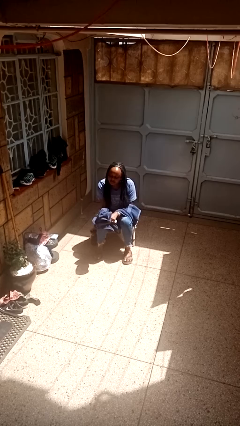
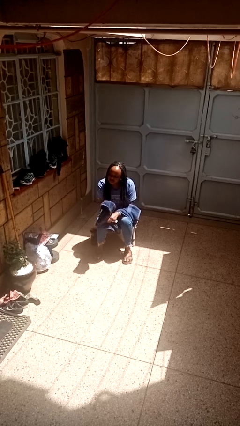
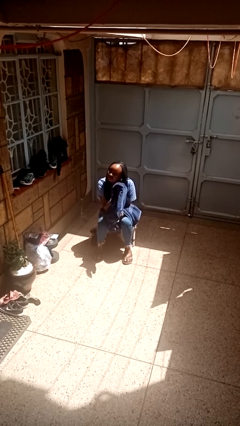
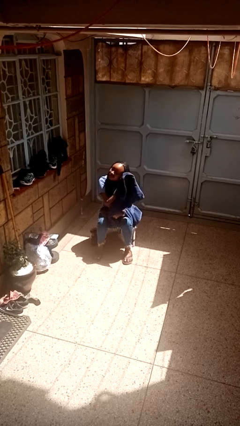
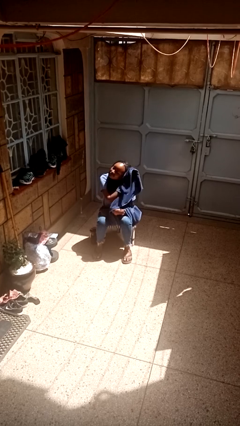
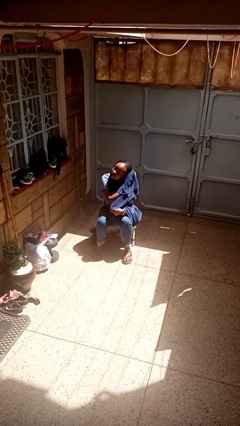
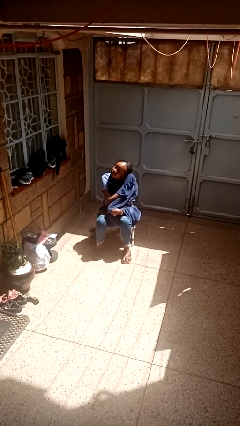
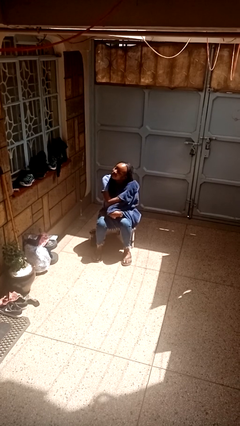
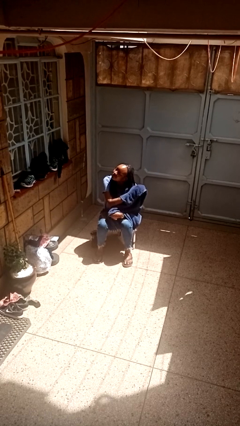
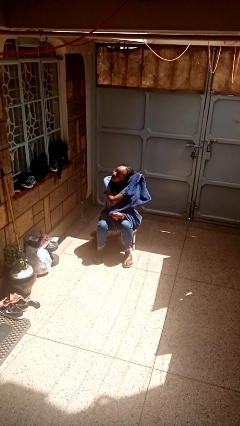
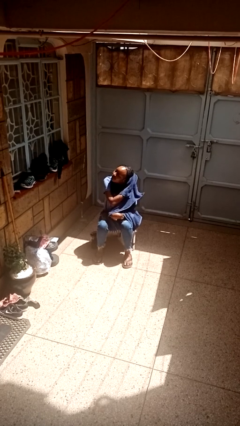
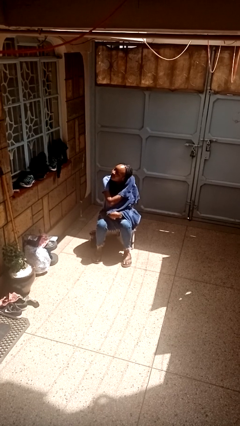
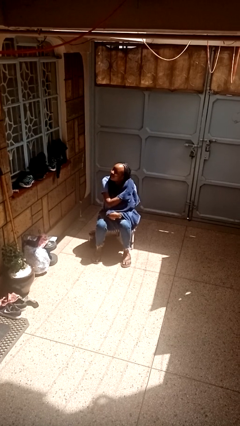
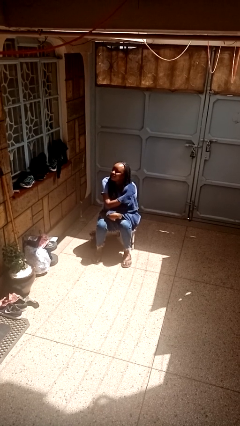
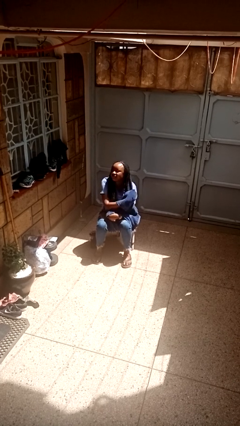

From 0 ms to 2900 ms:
person dries hair with towel

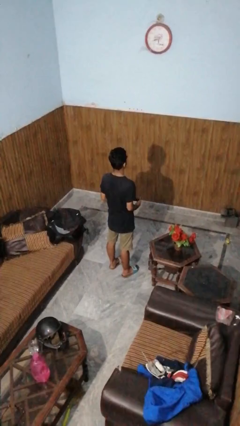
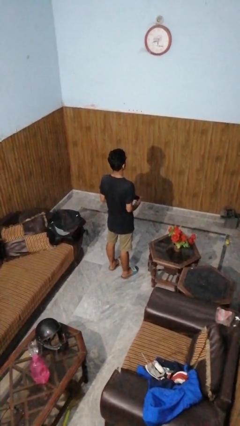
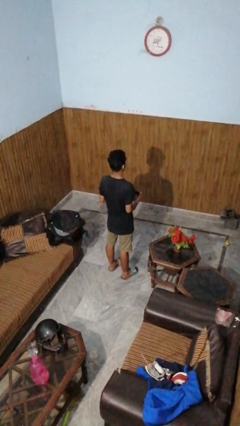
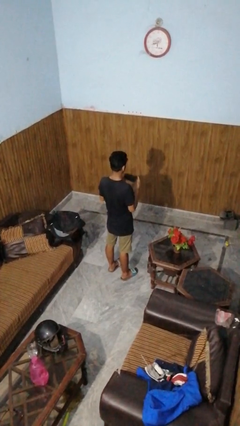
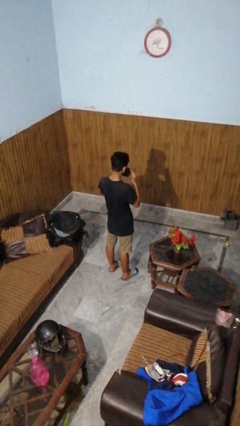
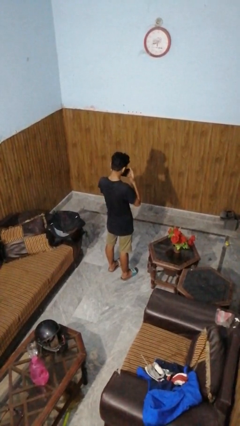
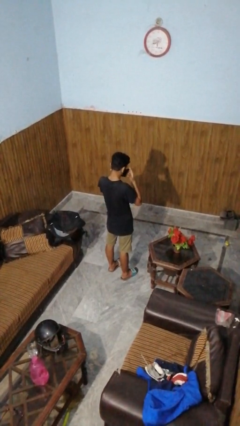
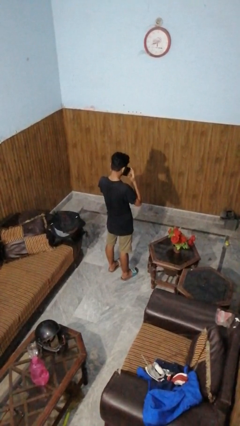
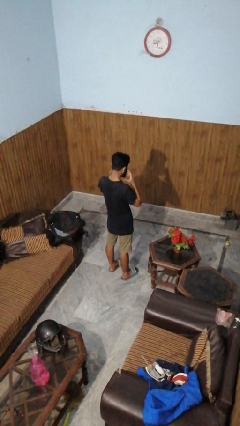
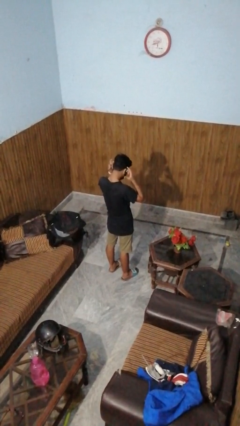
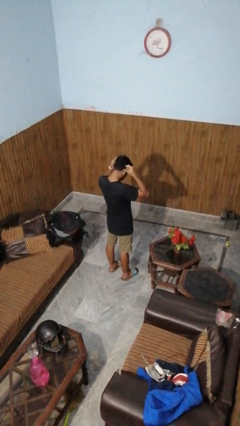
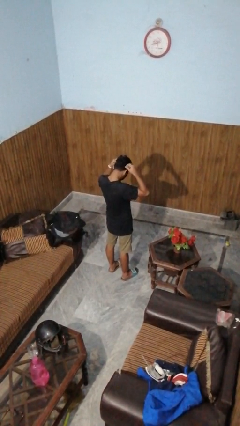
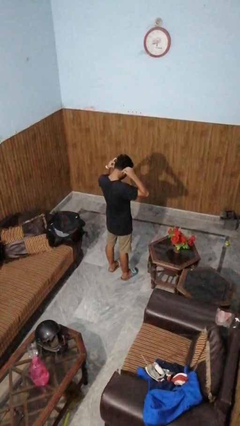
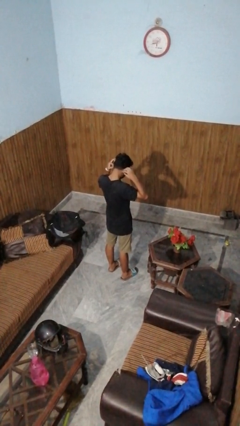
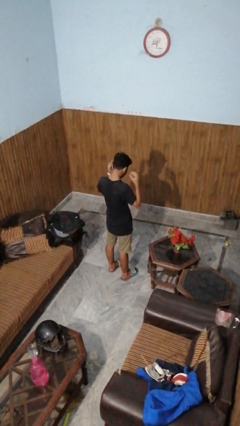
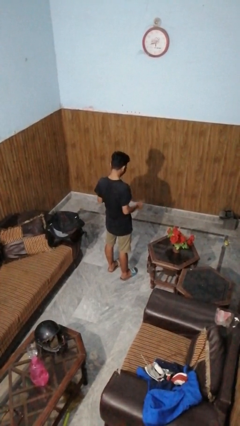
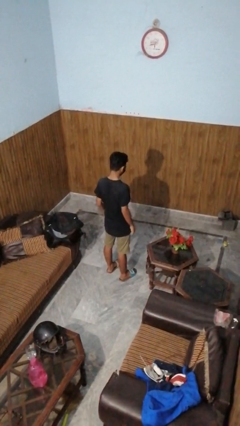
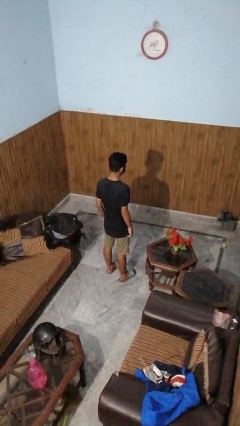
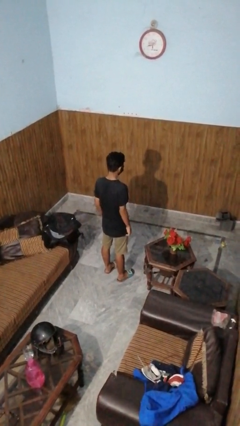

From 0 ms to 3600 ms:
person puts on facemask

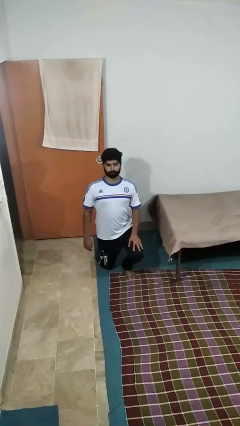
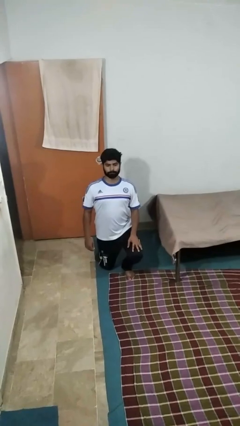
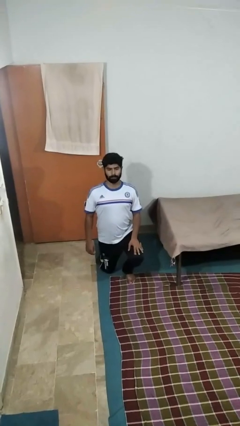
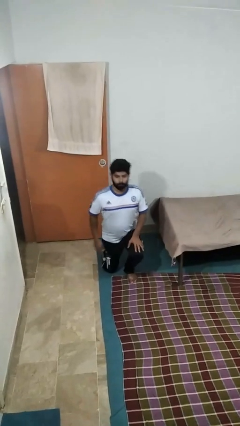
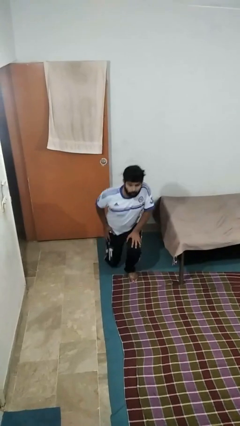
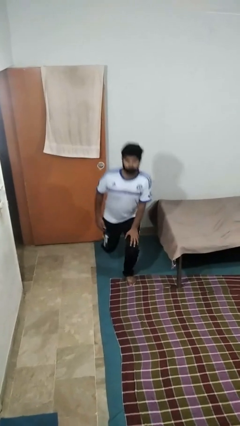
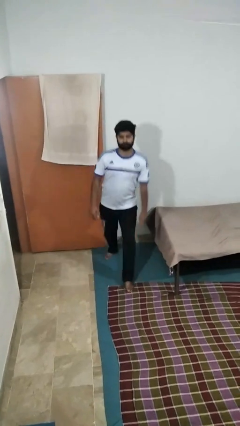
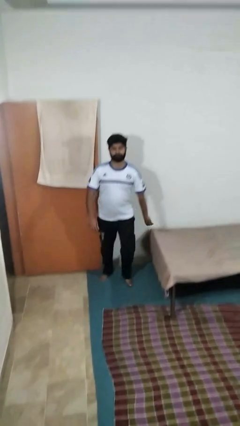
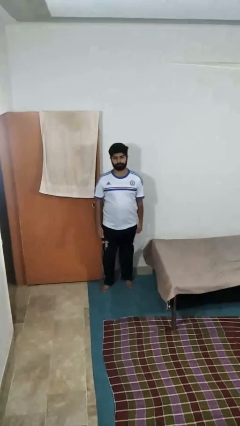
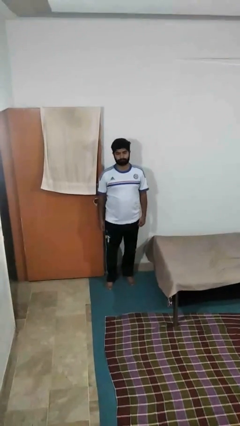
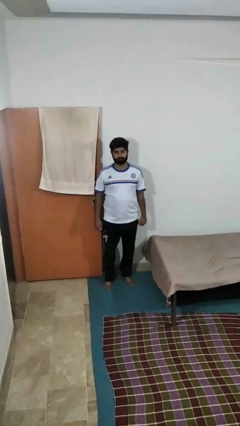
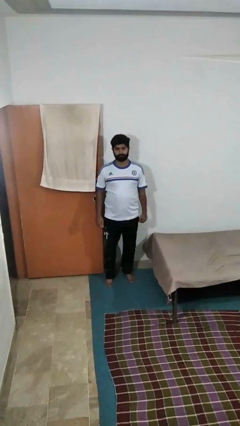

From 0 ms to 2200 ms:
person stands up from floor

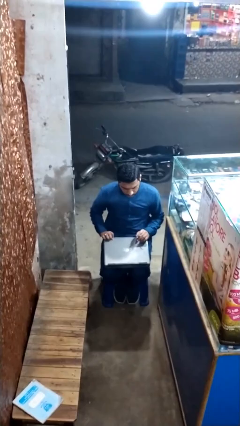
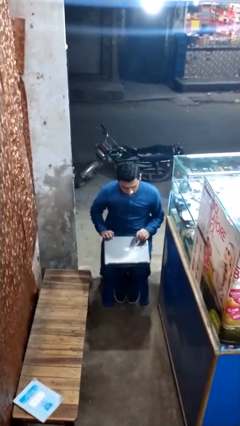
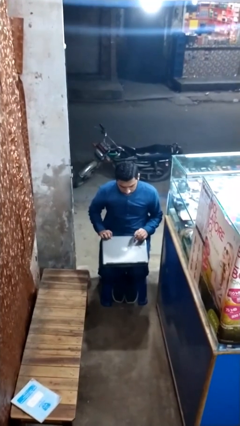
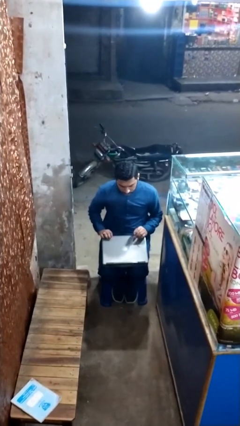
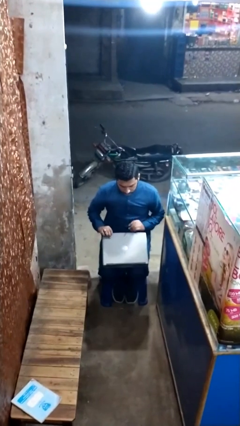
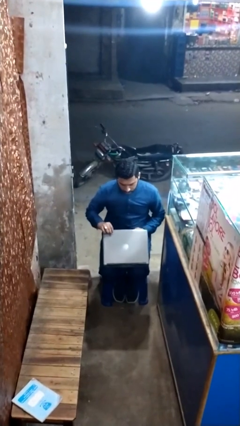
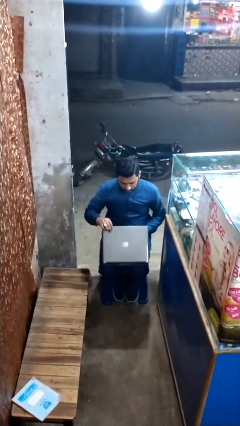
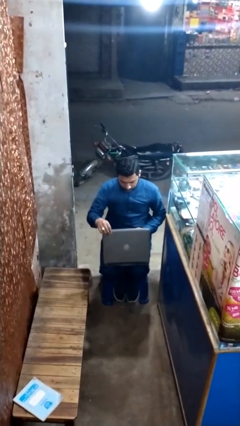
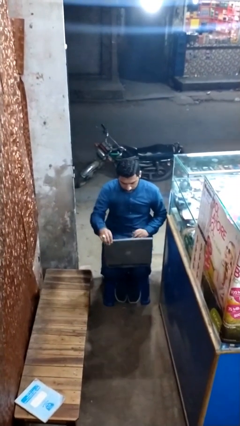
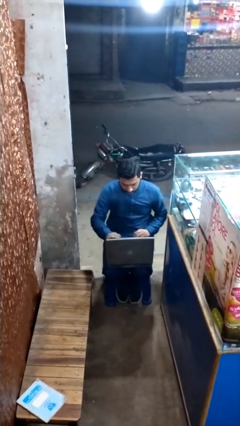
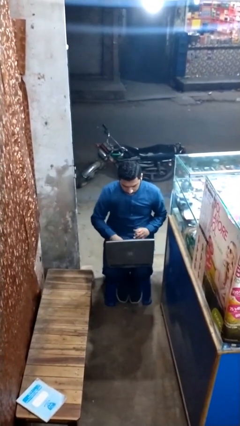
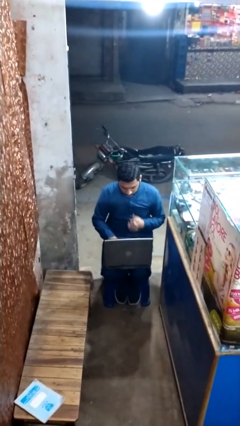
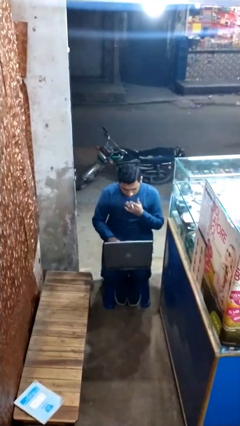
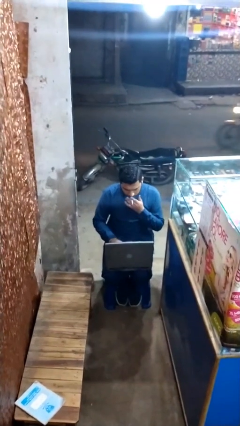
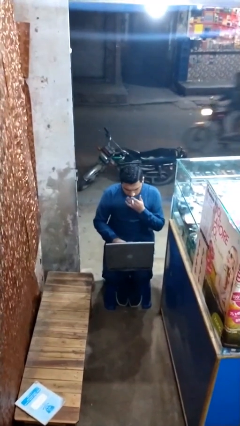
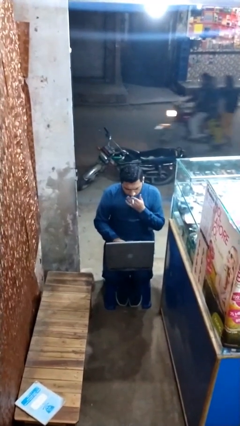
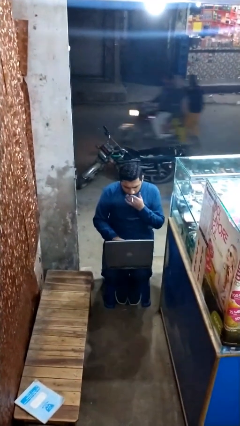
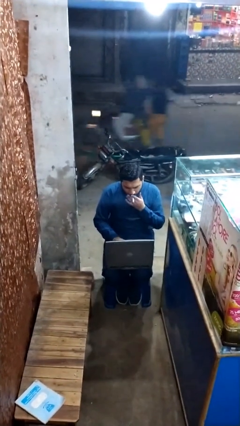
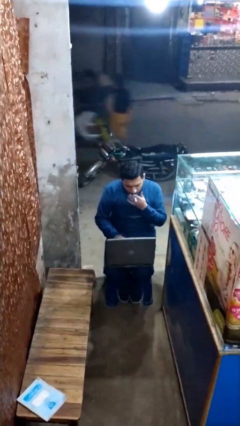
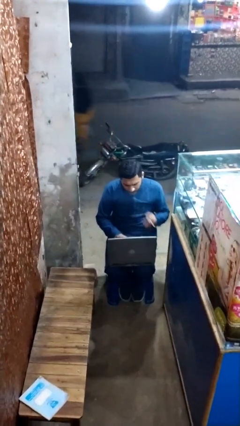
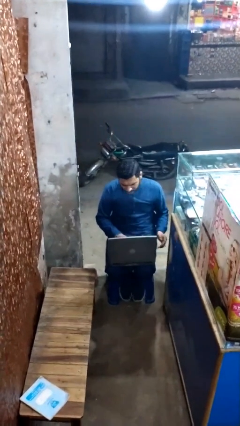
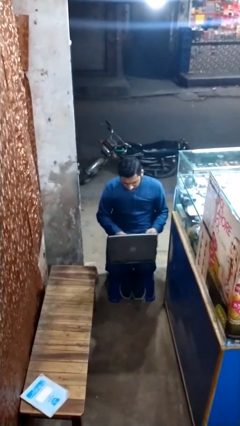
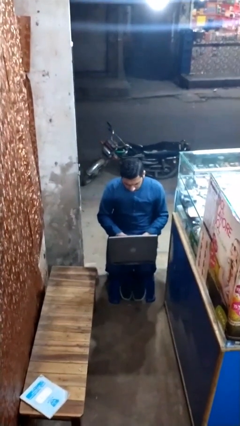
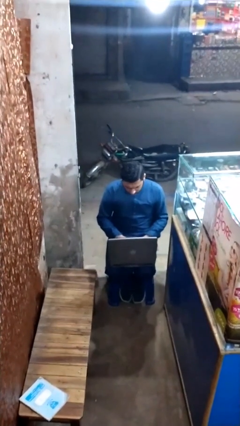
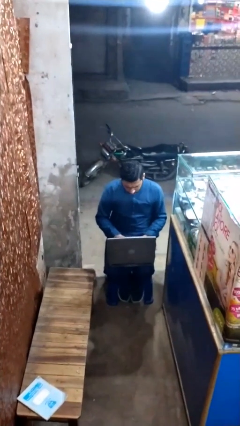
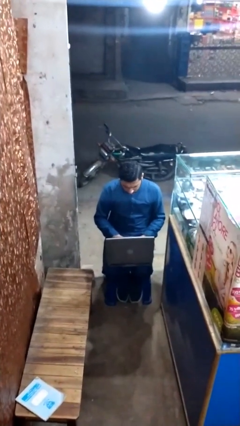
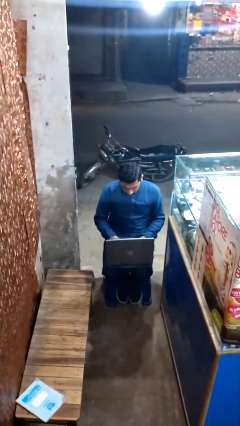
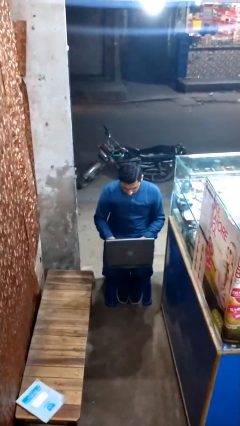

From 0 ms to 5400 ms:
person interacts with laptop

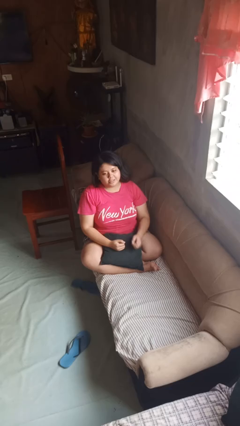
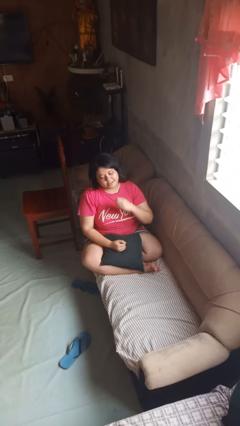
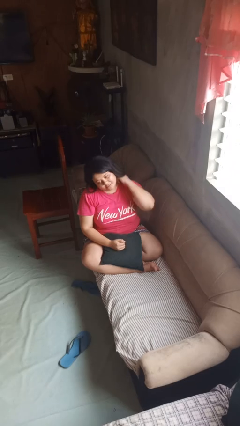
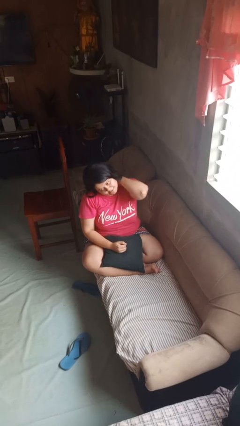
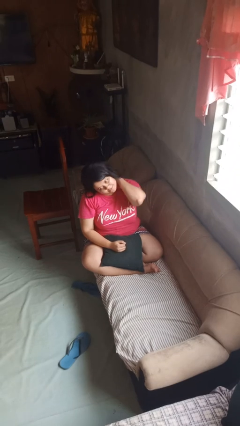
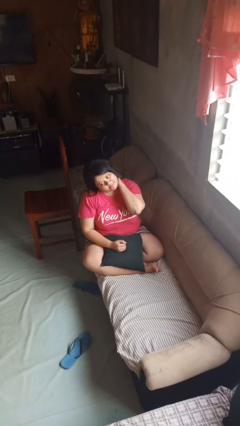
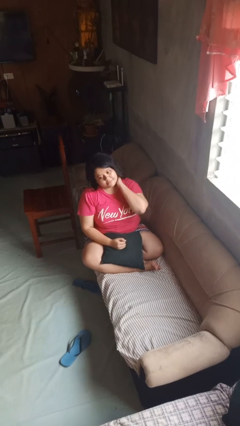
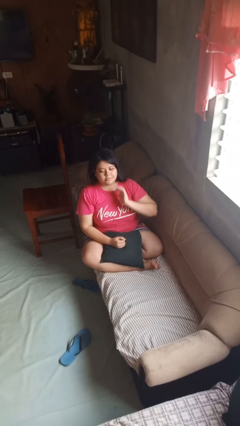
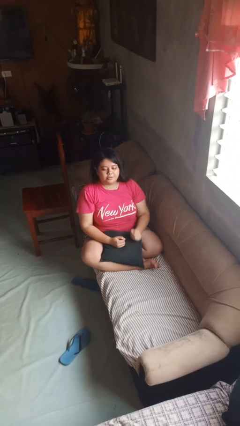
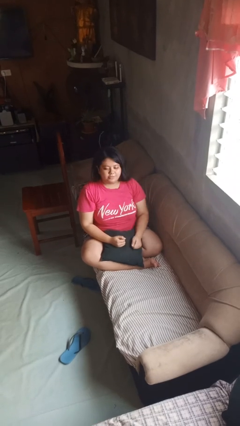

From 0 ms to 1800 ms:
person rubs neck

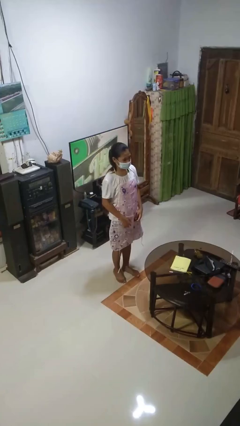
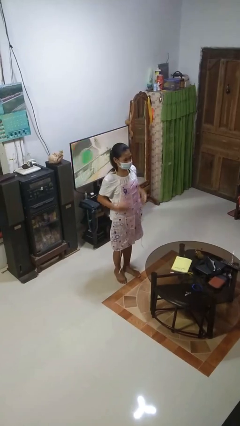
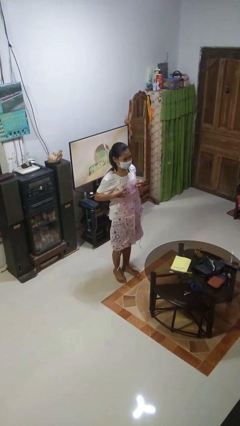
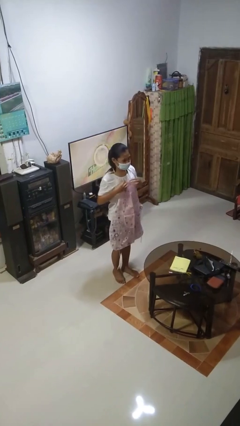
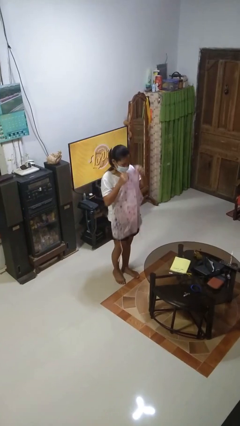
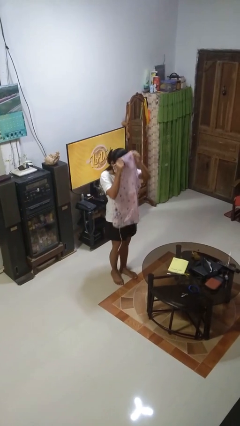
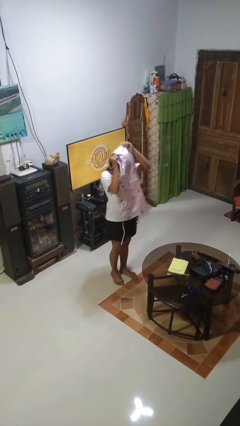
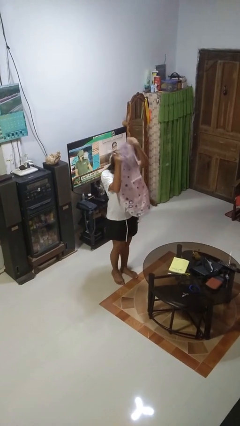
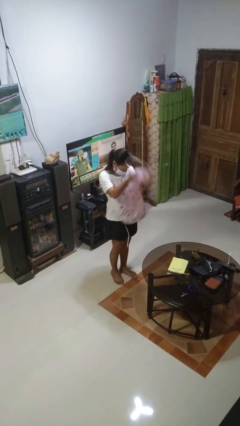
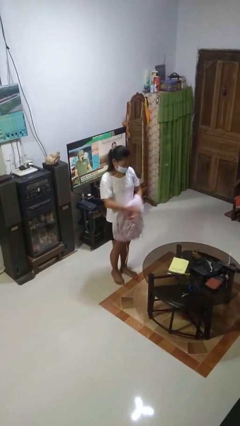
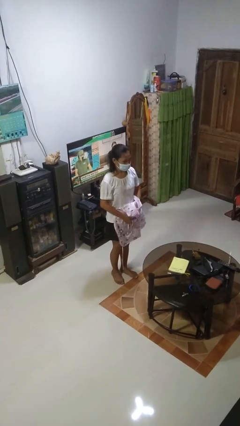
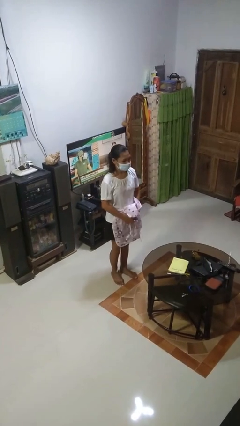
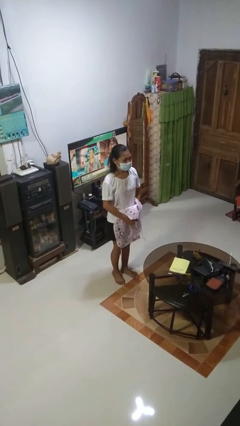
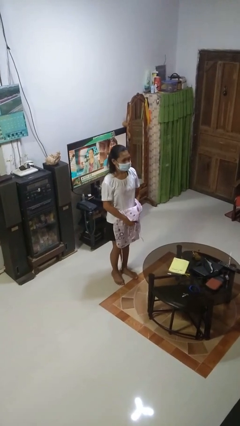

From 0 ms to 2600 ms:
person takes off apron
